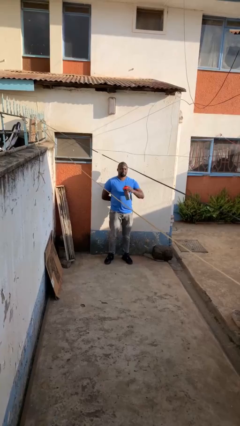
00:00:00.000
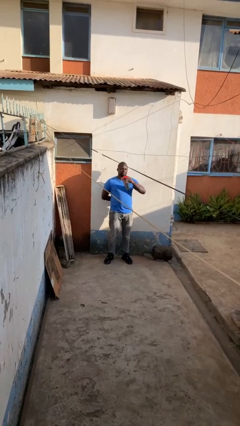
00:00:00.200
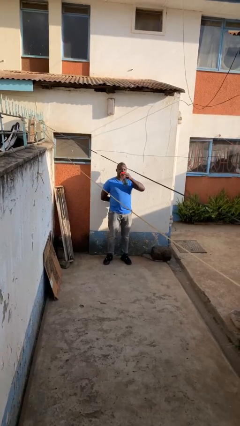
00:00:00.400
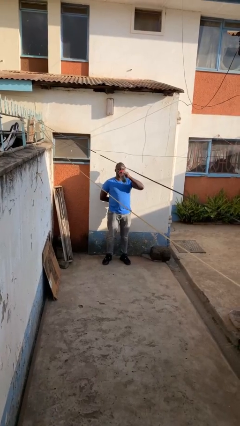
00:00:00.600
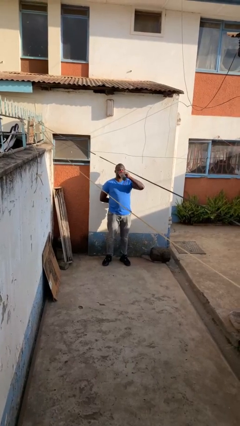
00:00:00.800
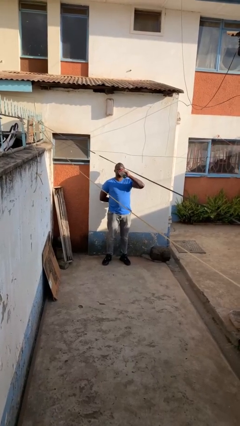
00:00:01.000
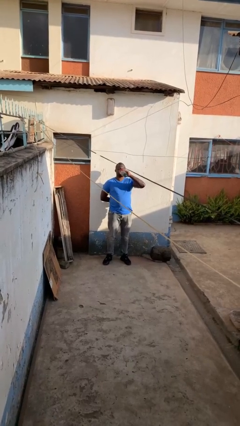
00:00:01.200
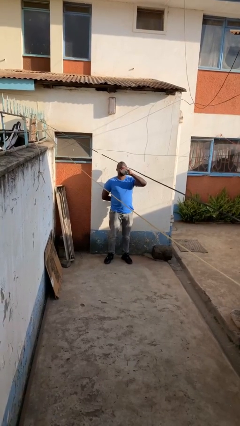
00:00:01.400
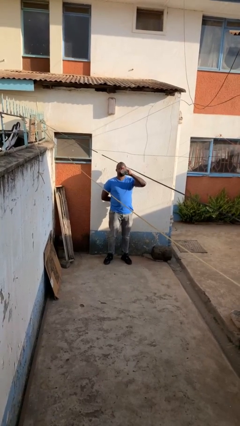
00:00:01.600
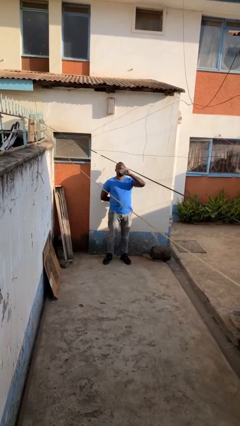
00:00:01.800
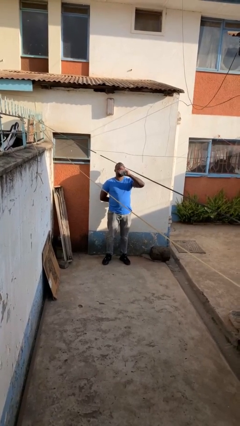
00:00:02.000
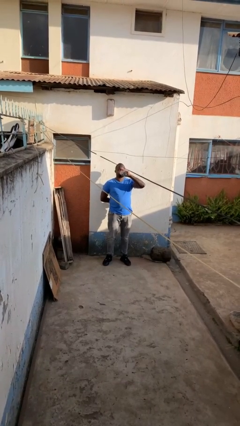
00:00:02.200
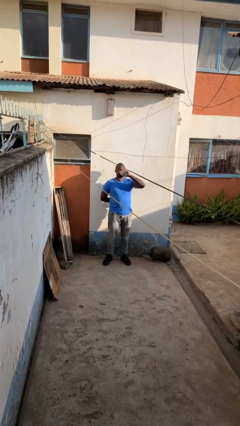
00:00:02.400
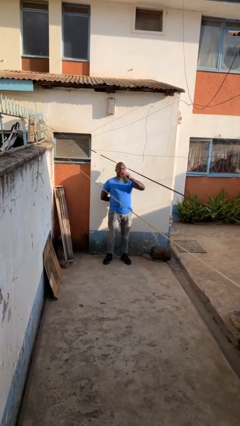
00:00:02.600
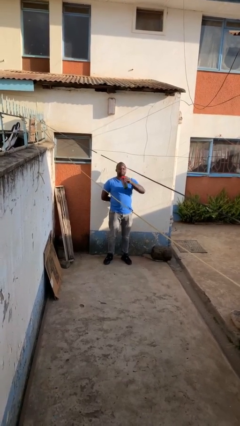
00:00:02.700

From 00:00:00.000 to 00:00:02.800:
person drinks from bottle

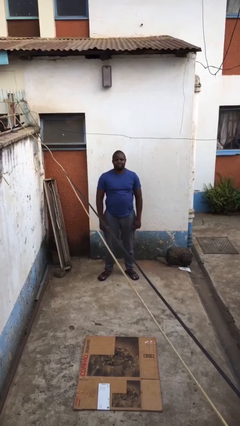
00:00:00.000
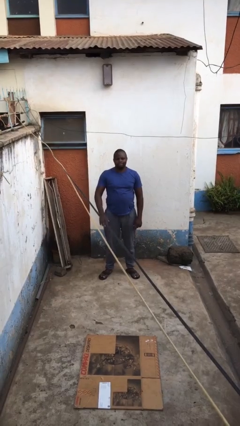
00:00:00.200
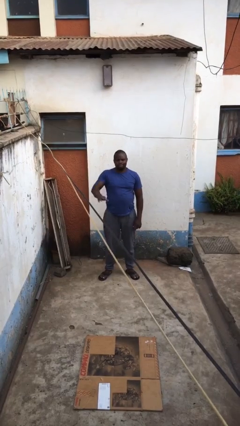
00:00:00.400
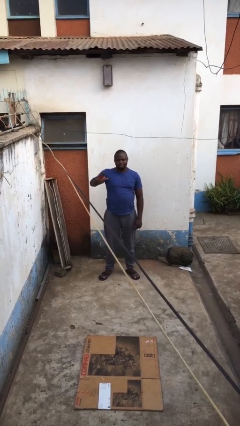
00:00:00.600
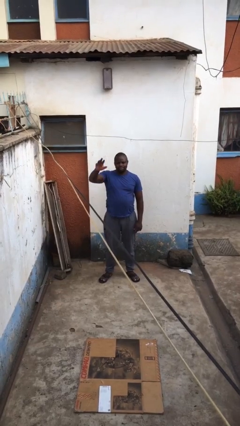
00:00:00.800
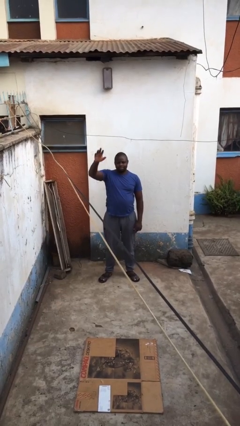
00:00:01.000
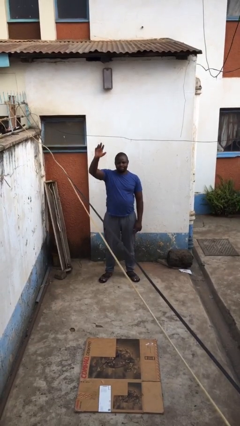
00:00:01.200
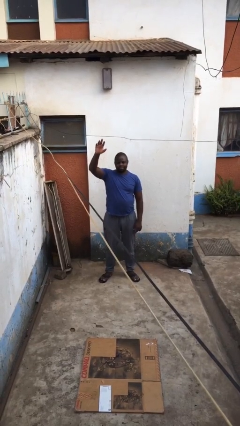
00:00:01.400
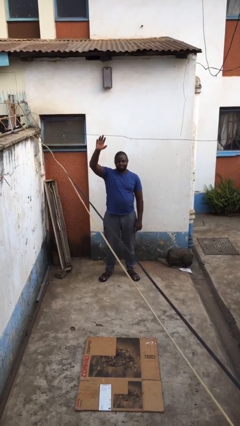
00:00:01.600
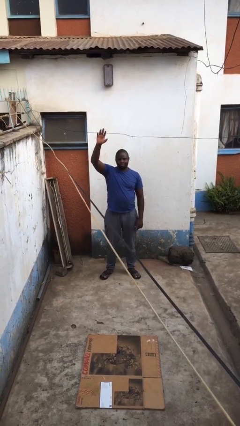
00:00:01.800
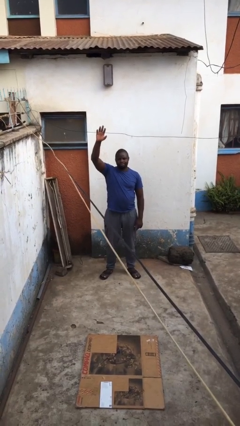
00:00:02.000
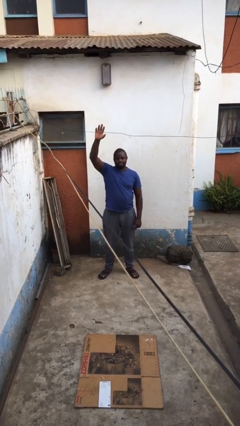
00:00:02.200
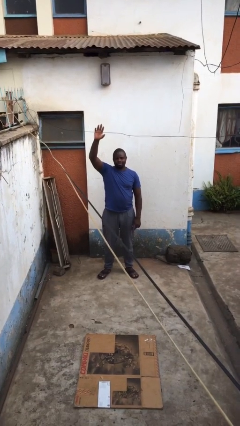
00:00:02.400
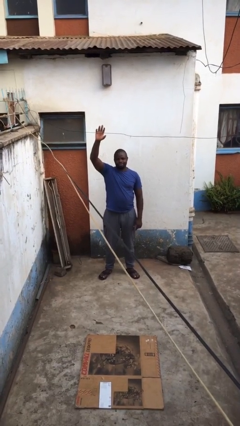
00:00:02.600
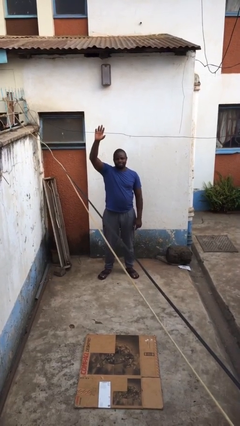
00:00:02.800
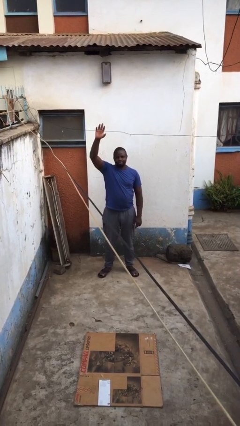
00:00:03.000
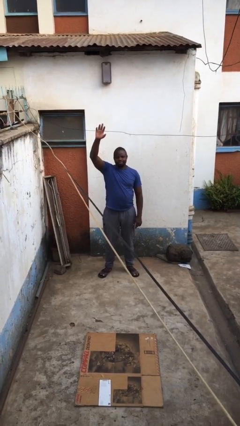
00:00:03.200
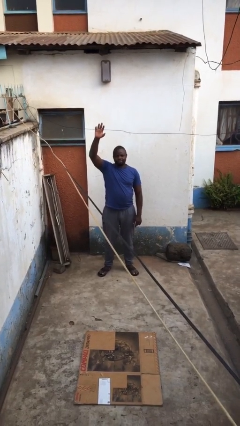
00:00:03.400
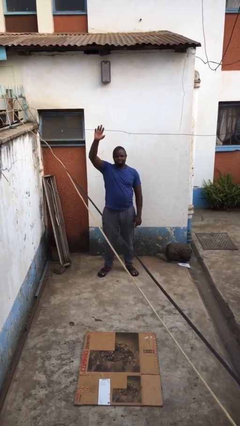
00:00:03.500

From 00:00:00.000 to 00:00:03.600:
person gestures raise hand

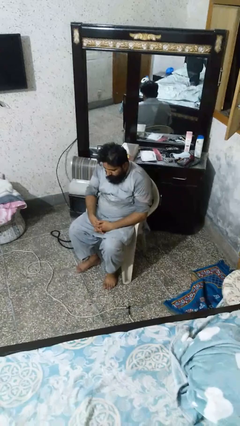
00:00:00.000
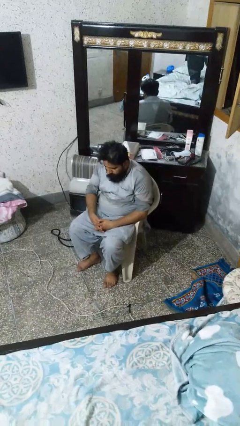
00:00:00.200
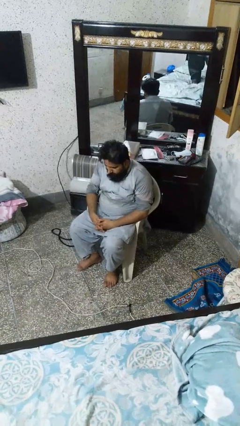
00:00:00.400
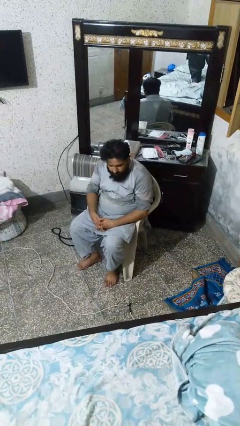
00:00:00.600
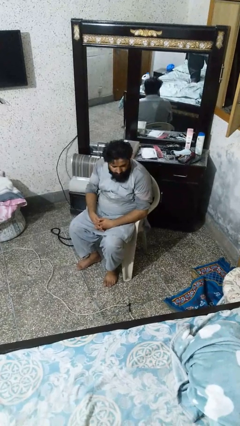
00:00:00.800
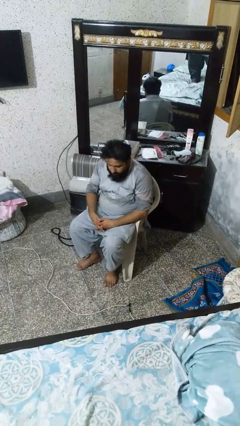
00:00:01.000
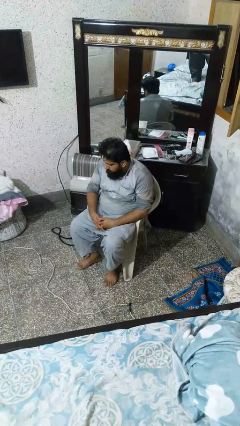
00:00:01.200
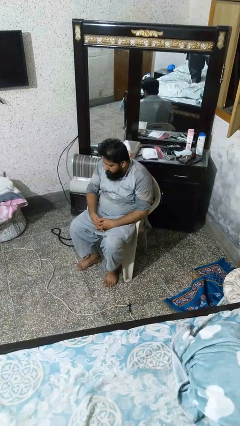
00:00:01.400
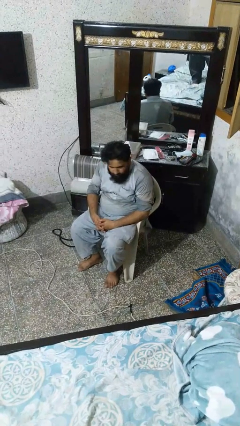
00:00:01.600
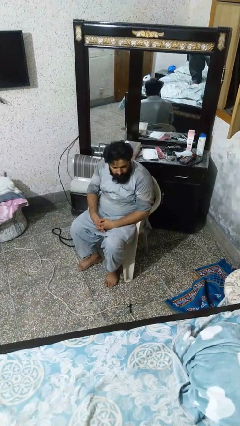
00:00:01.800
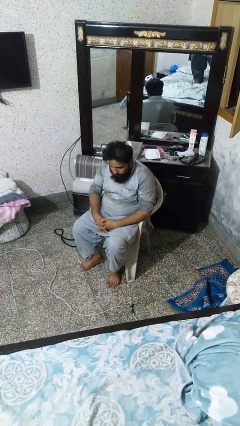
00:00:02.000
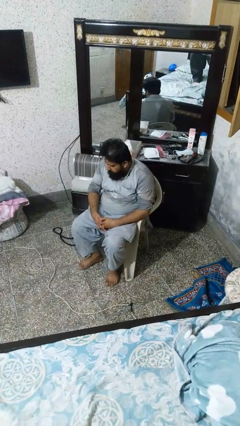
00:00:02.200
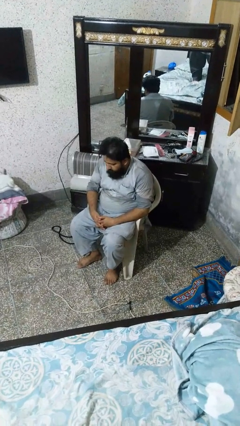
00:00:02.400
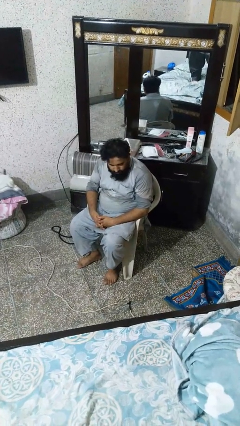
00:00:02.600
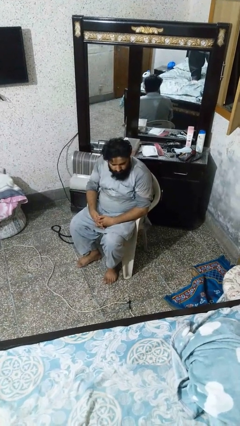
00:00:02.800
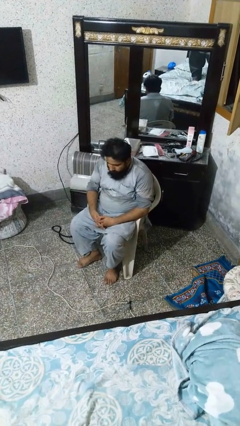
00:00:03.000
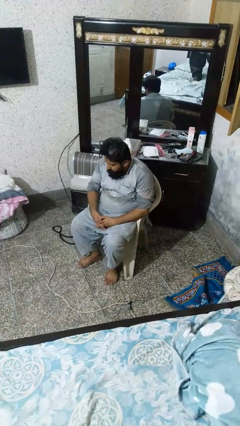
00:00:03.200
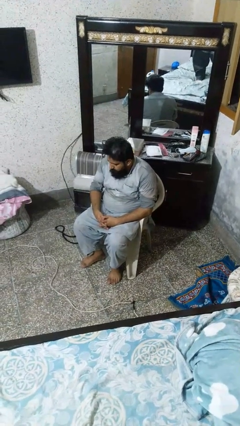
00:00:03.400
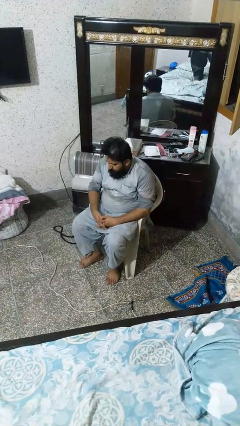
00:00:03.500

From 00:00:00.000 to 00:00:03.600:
person shakes head

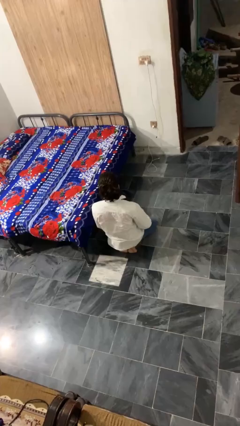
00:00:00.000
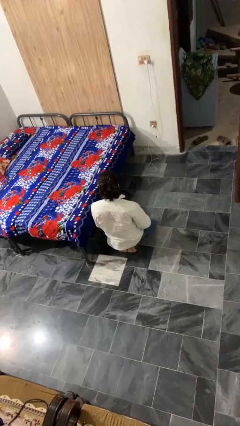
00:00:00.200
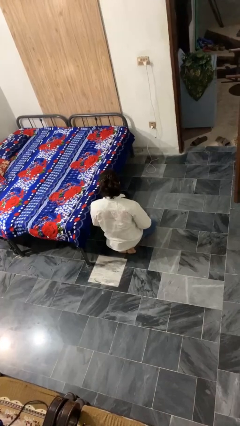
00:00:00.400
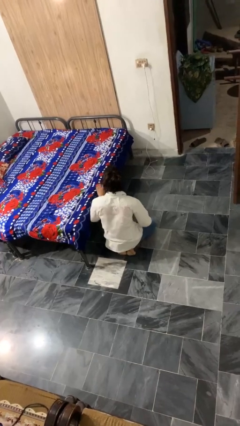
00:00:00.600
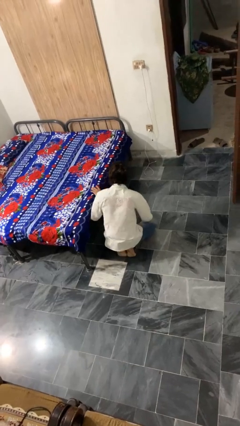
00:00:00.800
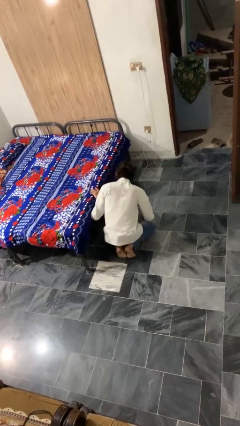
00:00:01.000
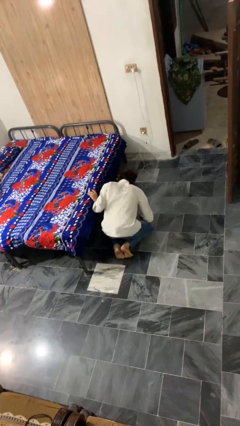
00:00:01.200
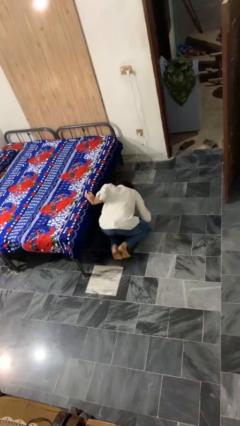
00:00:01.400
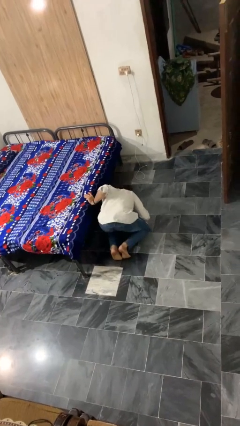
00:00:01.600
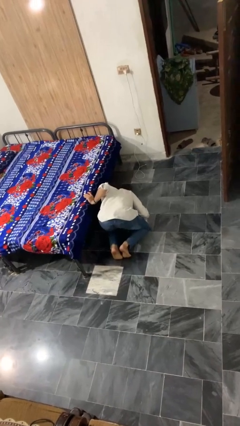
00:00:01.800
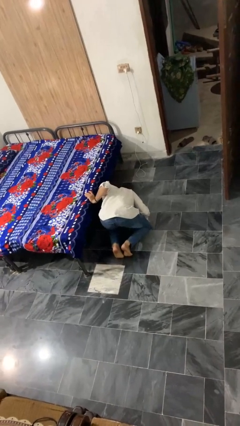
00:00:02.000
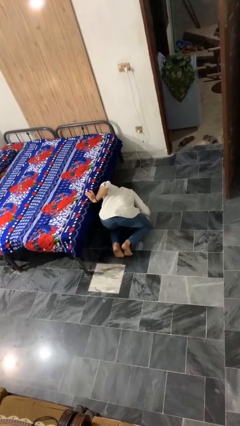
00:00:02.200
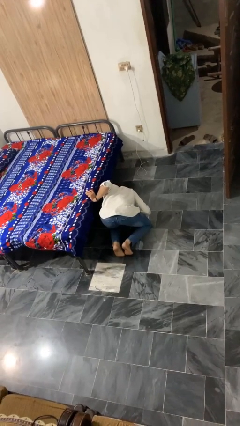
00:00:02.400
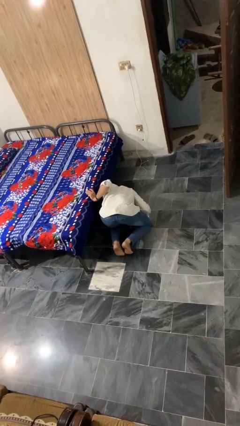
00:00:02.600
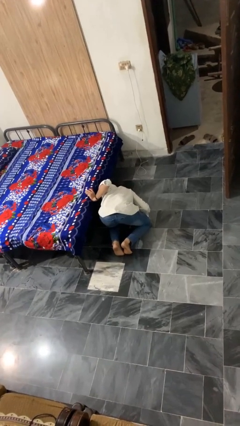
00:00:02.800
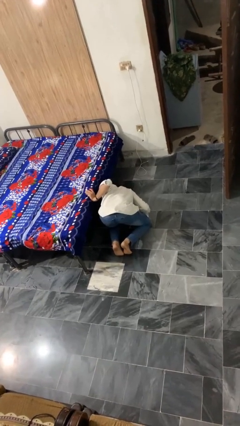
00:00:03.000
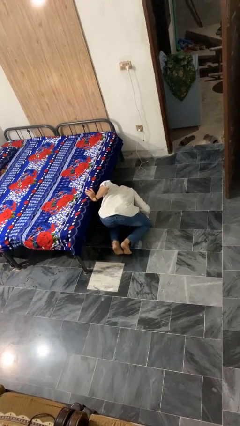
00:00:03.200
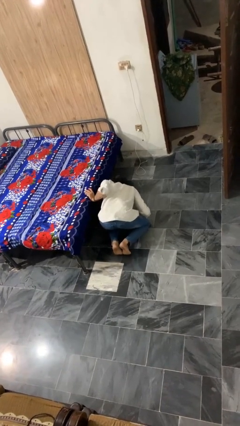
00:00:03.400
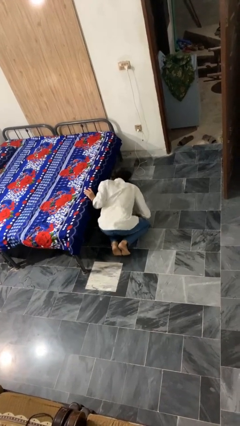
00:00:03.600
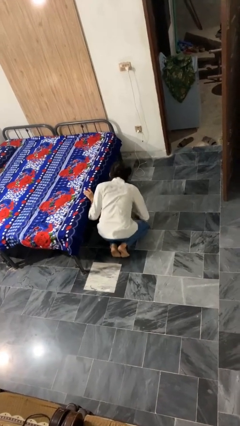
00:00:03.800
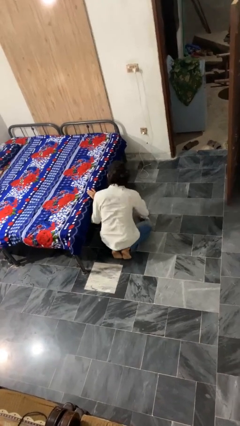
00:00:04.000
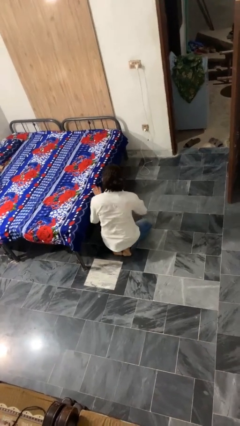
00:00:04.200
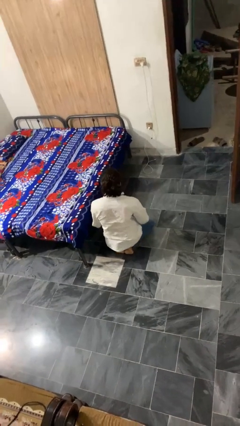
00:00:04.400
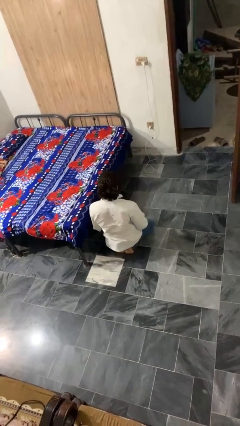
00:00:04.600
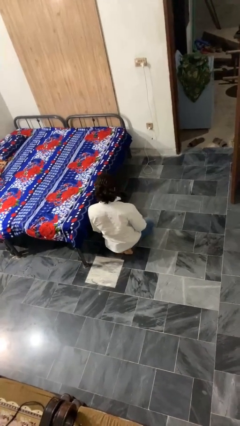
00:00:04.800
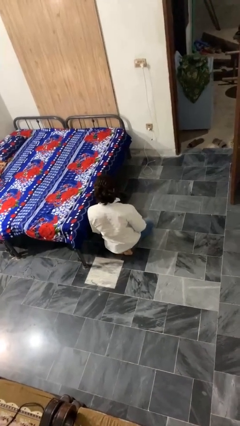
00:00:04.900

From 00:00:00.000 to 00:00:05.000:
person searches under bed

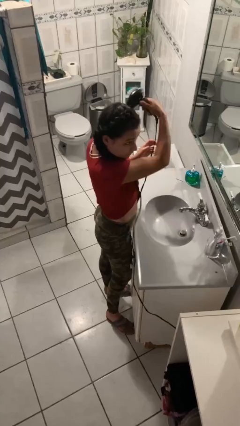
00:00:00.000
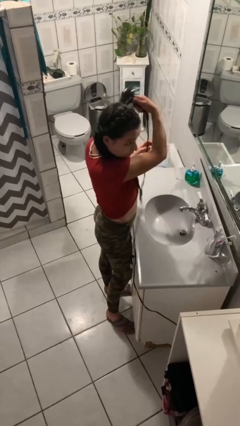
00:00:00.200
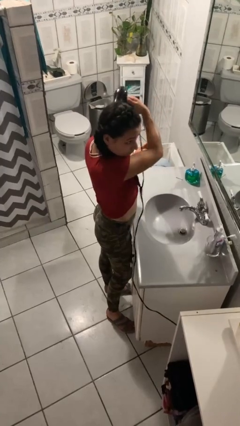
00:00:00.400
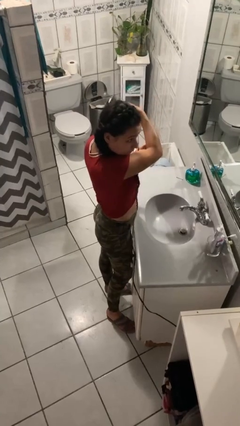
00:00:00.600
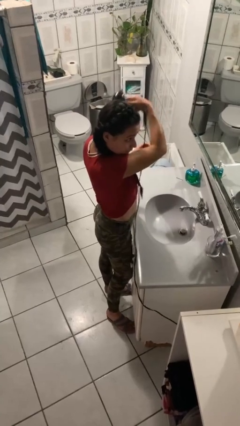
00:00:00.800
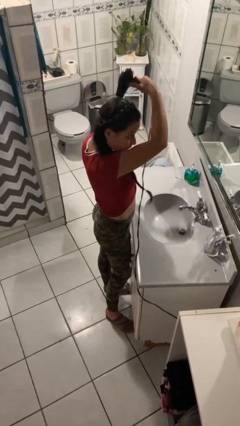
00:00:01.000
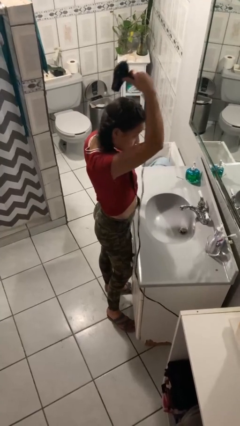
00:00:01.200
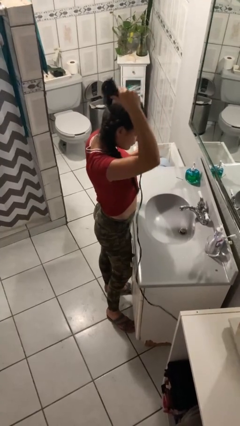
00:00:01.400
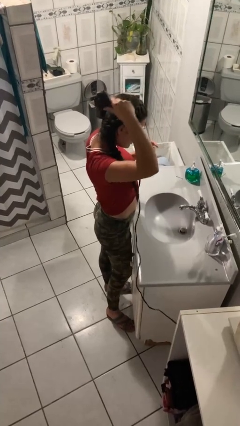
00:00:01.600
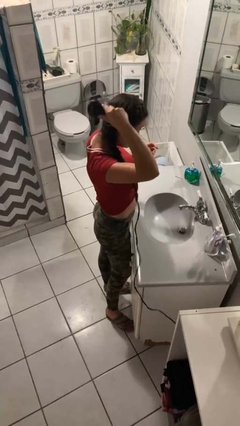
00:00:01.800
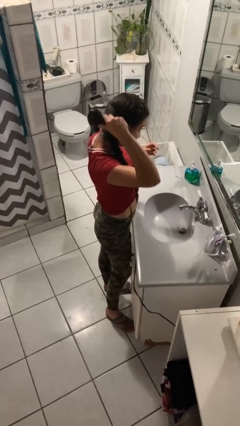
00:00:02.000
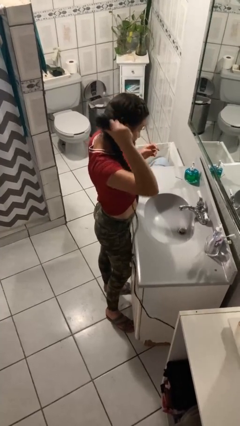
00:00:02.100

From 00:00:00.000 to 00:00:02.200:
person dries hair with hairdryer

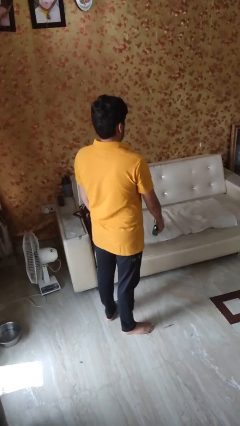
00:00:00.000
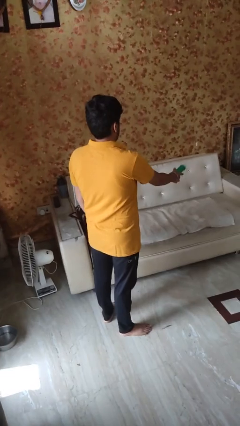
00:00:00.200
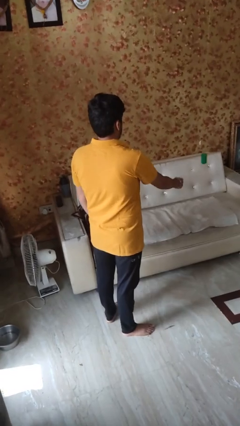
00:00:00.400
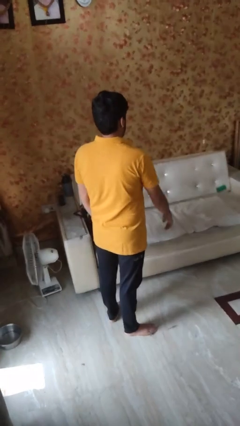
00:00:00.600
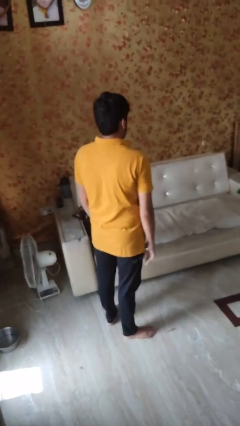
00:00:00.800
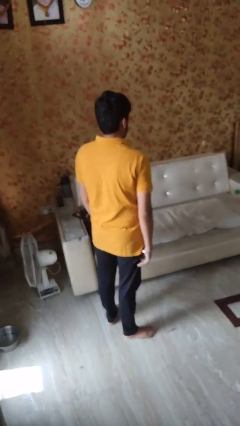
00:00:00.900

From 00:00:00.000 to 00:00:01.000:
person throws object on bed
